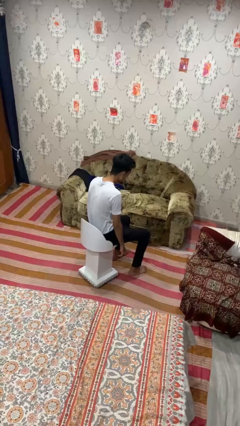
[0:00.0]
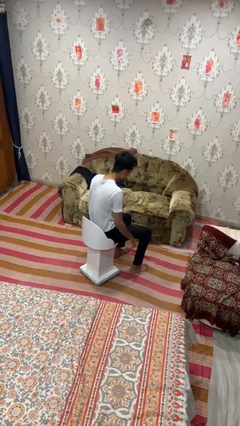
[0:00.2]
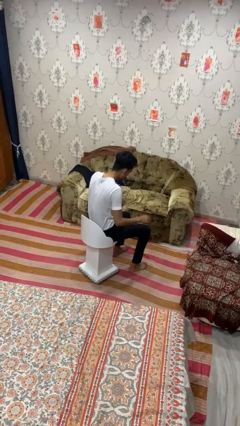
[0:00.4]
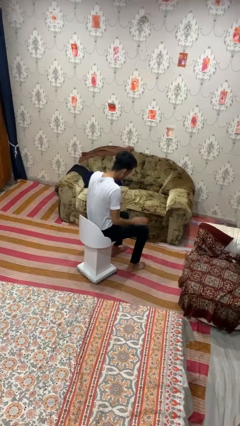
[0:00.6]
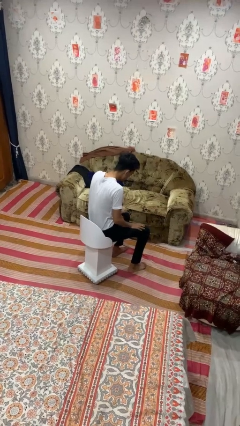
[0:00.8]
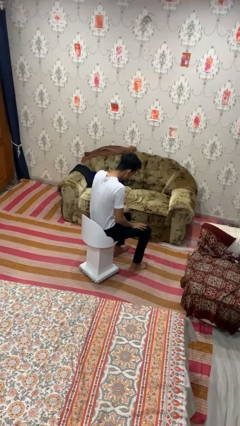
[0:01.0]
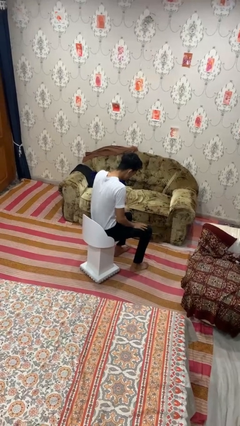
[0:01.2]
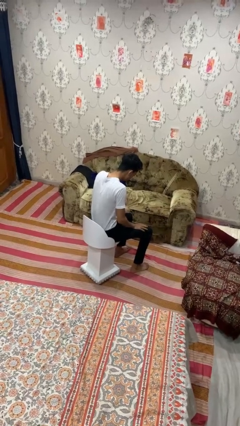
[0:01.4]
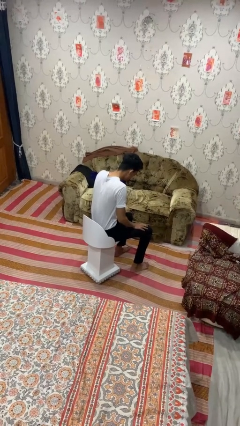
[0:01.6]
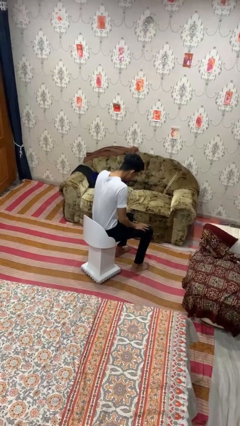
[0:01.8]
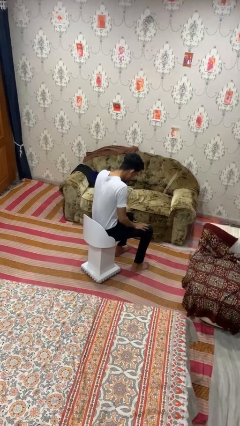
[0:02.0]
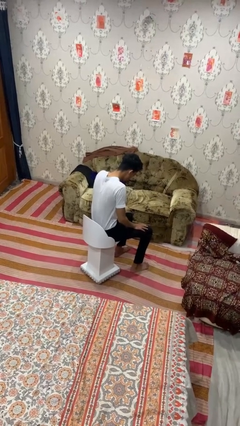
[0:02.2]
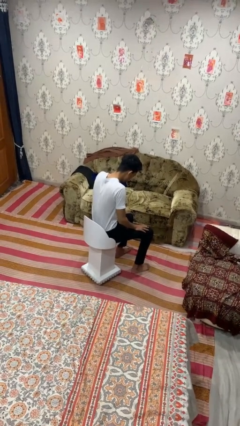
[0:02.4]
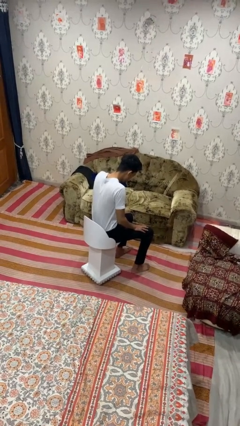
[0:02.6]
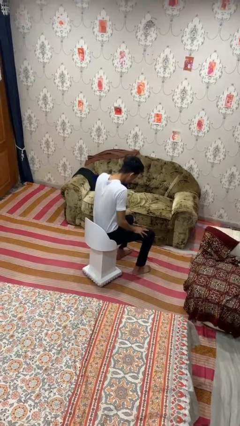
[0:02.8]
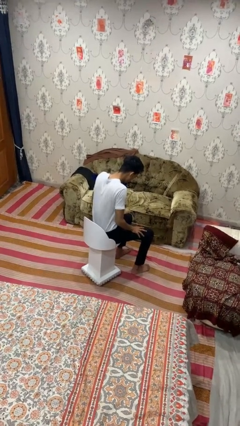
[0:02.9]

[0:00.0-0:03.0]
person slaps hands on thighs

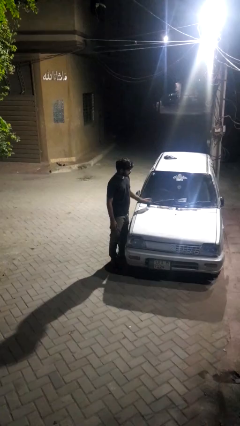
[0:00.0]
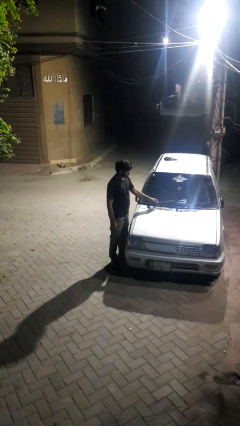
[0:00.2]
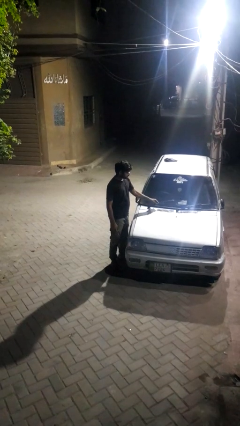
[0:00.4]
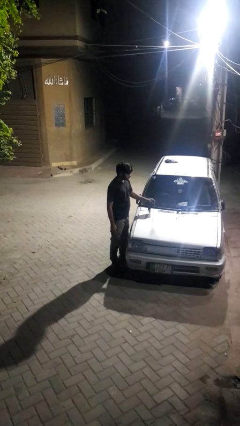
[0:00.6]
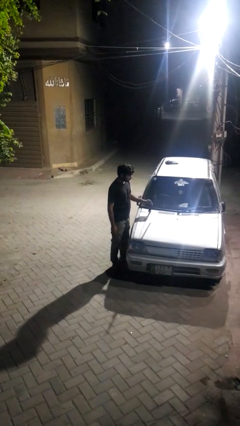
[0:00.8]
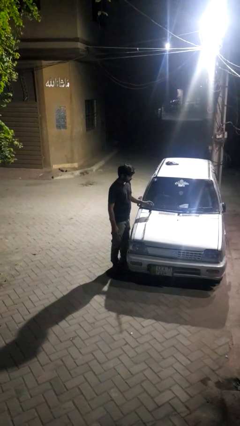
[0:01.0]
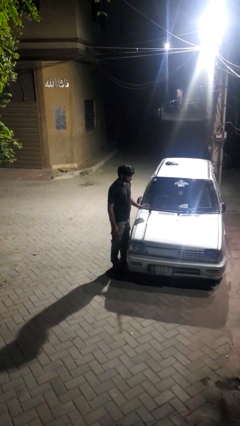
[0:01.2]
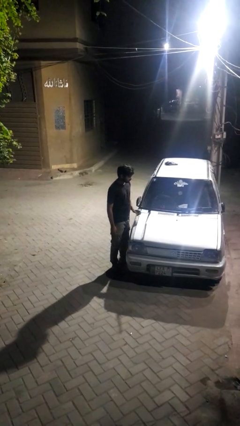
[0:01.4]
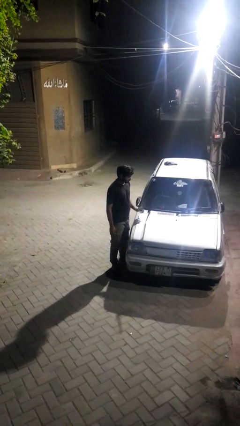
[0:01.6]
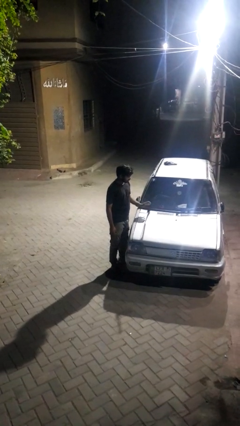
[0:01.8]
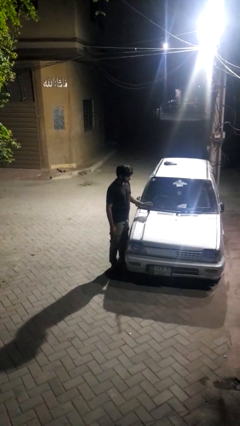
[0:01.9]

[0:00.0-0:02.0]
person flips up car wipers

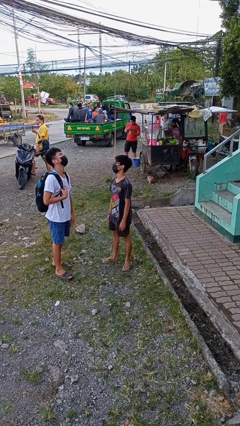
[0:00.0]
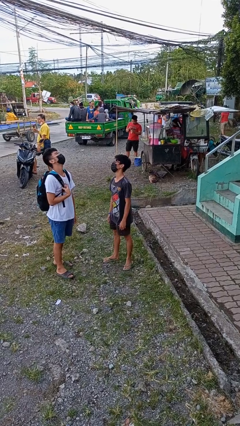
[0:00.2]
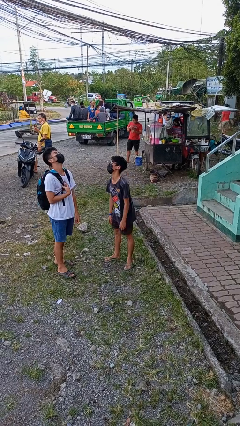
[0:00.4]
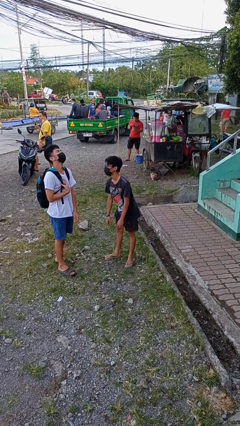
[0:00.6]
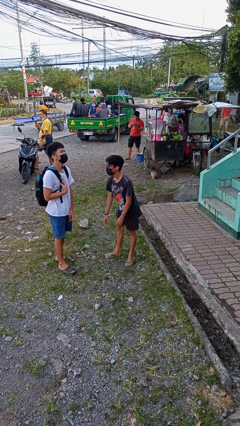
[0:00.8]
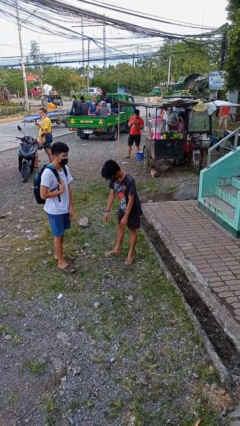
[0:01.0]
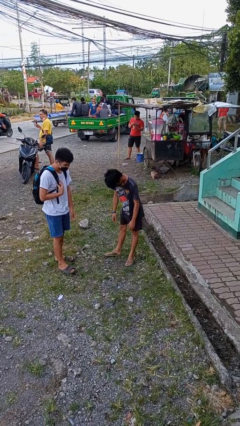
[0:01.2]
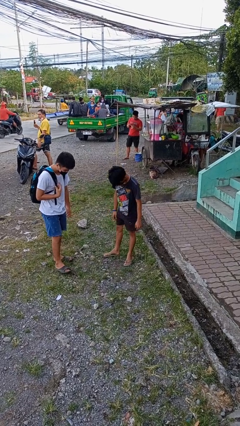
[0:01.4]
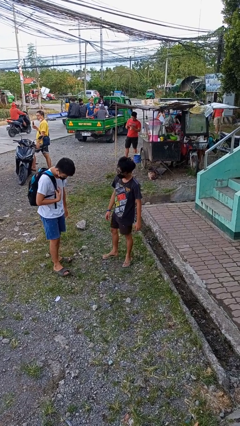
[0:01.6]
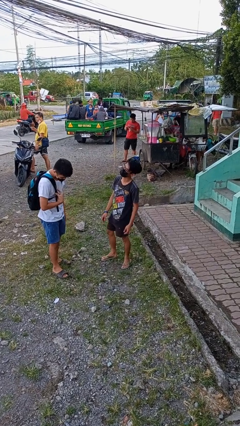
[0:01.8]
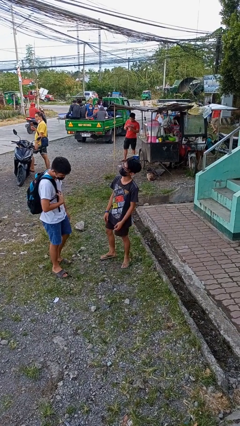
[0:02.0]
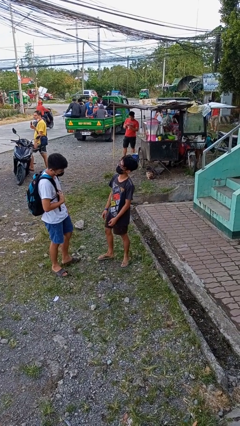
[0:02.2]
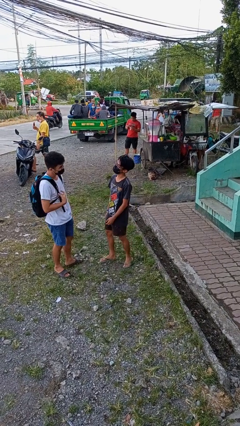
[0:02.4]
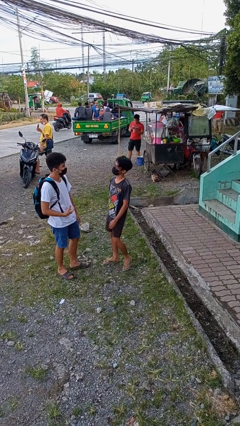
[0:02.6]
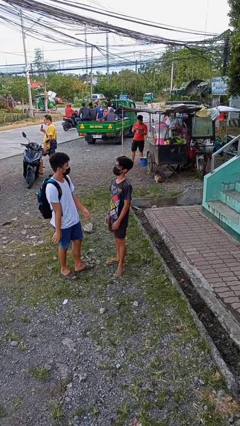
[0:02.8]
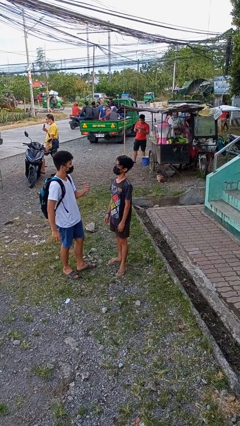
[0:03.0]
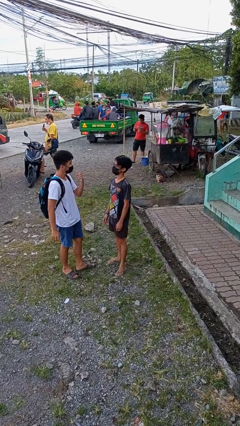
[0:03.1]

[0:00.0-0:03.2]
person laughs with person

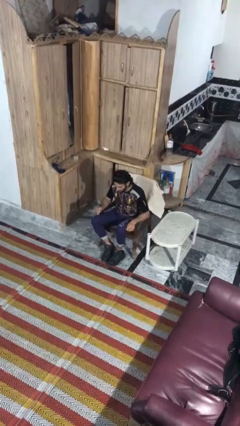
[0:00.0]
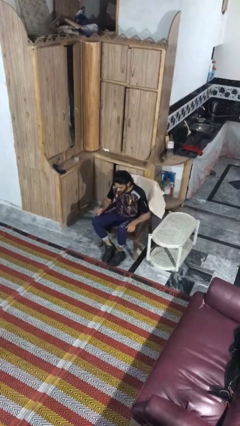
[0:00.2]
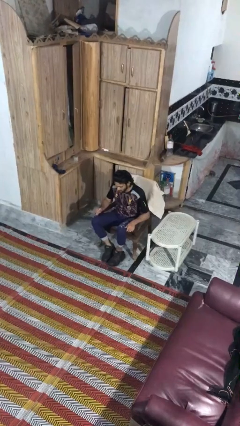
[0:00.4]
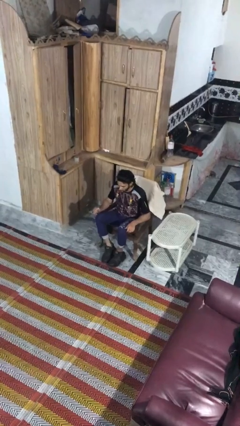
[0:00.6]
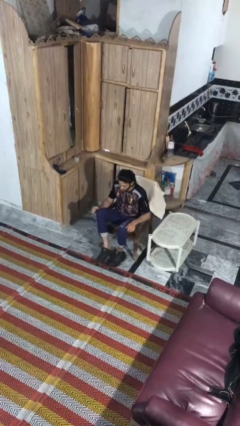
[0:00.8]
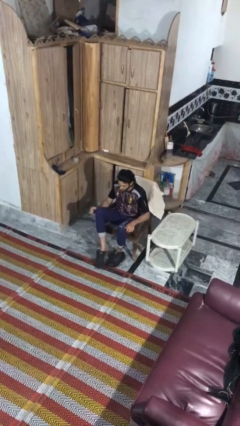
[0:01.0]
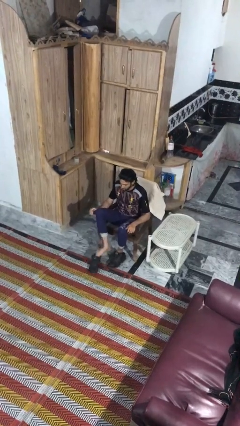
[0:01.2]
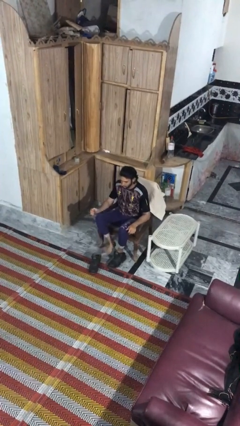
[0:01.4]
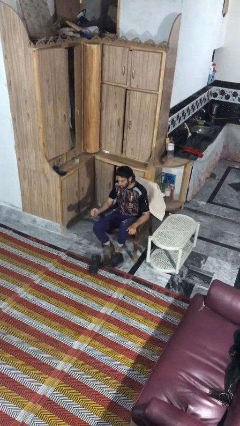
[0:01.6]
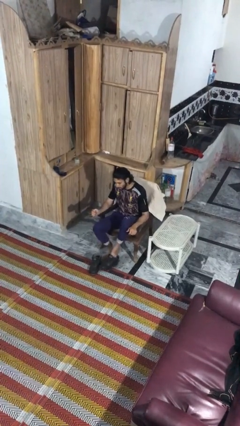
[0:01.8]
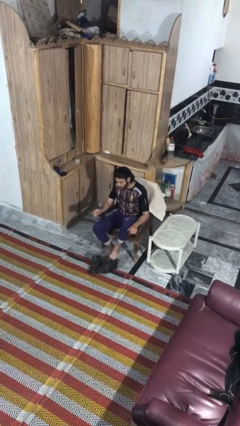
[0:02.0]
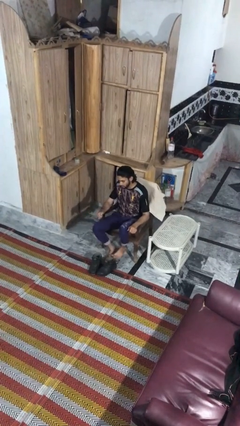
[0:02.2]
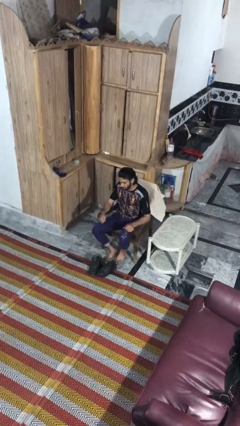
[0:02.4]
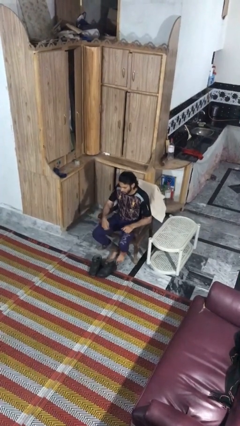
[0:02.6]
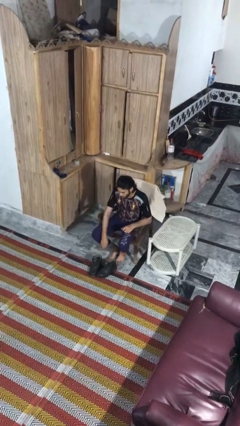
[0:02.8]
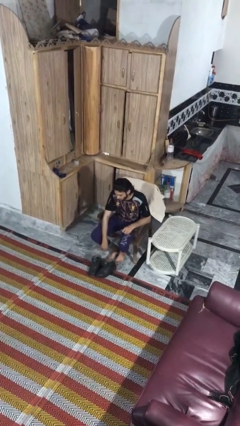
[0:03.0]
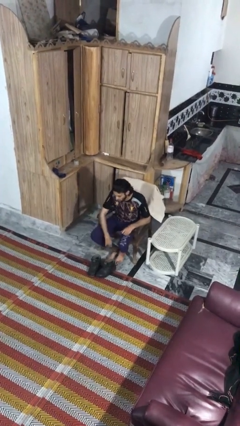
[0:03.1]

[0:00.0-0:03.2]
person takes off boots

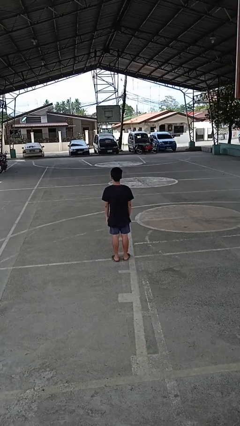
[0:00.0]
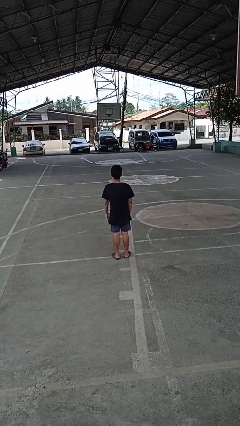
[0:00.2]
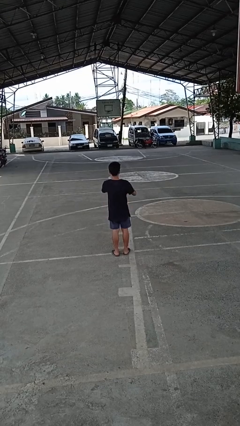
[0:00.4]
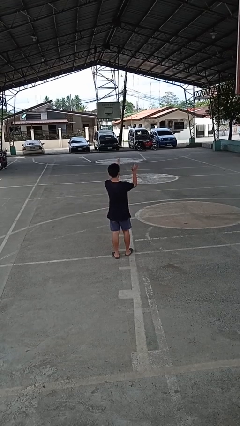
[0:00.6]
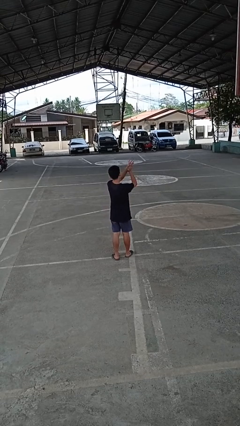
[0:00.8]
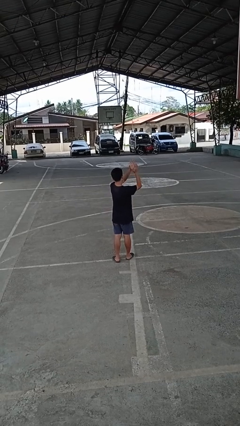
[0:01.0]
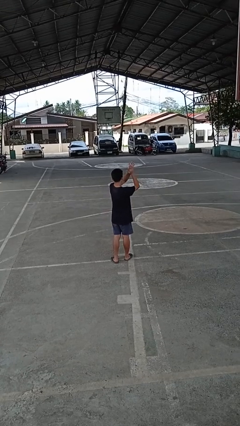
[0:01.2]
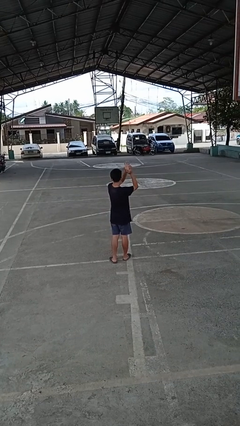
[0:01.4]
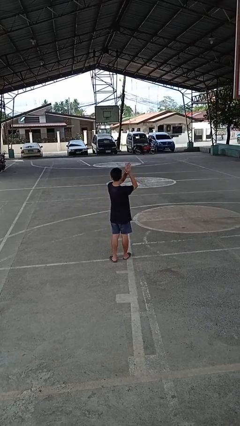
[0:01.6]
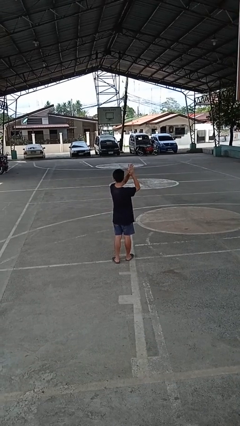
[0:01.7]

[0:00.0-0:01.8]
person claps hands

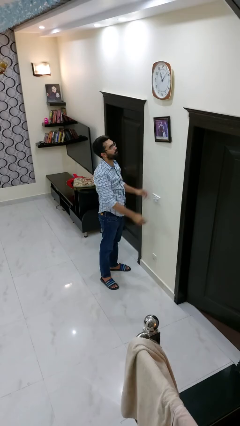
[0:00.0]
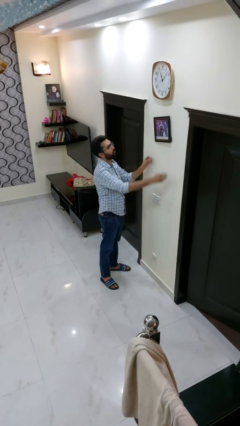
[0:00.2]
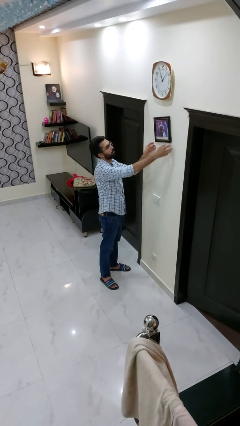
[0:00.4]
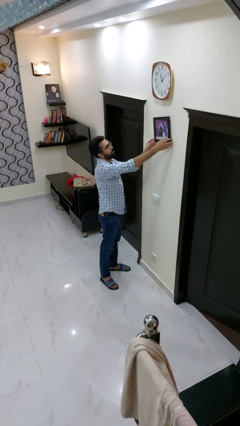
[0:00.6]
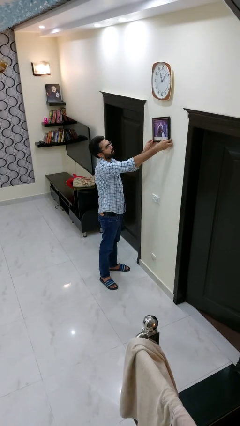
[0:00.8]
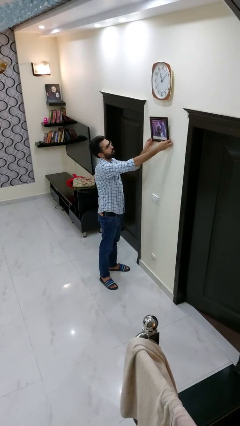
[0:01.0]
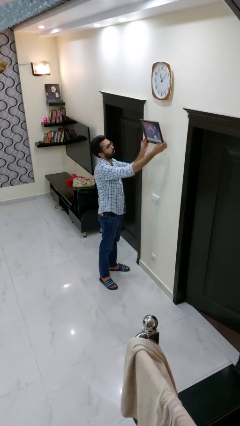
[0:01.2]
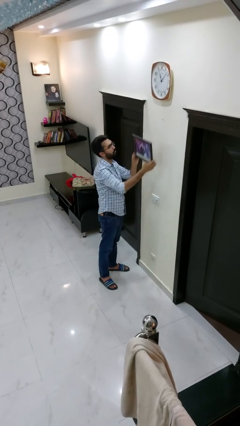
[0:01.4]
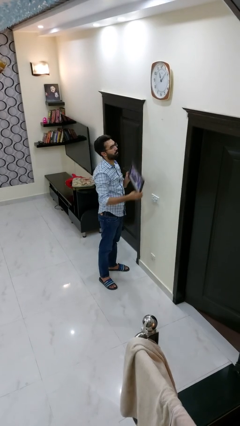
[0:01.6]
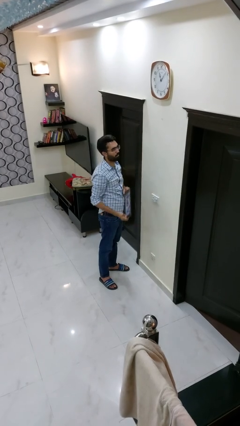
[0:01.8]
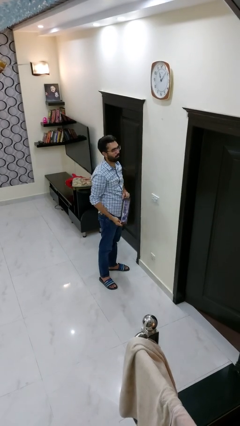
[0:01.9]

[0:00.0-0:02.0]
person takes down picture frame

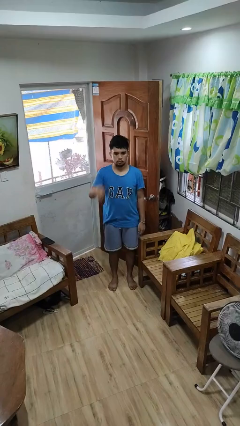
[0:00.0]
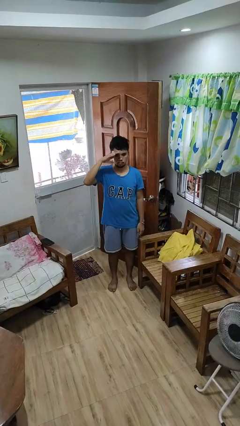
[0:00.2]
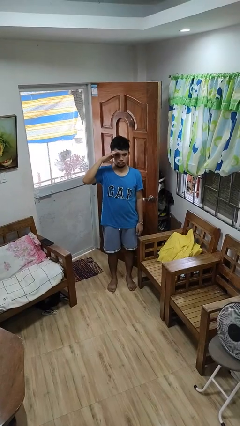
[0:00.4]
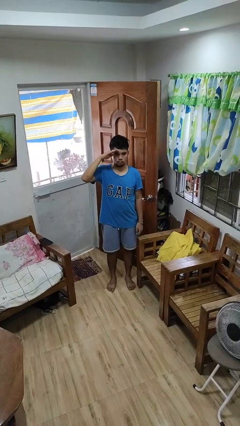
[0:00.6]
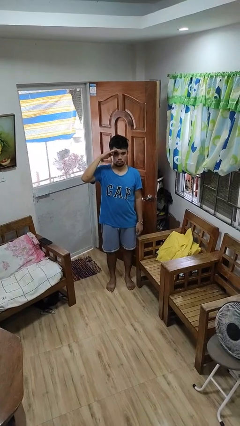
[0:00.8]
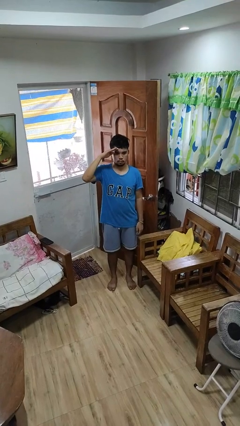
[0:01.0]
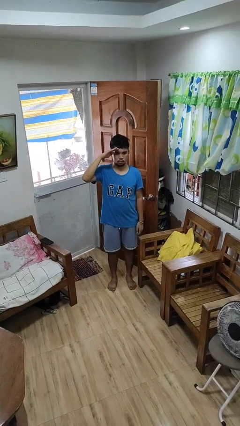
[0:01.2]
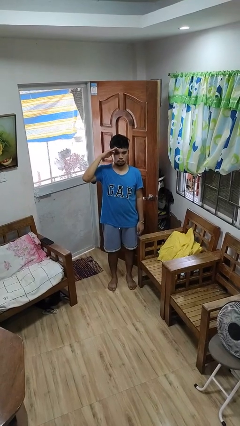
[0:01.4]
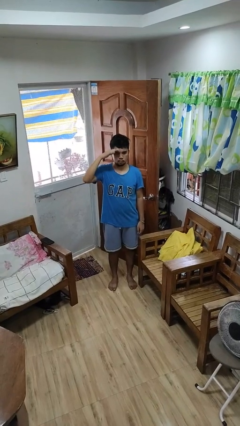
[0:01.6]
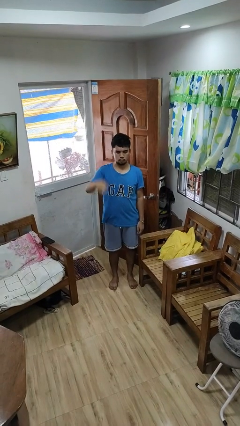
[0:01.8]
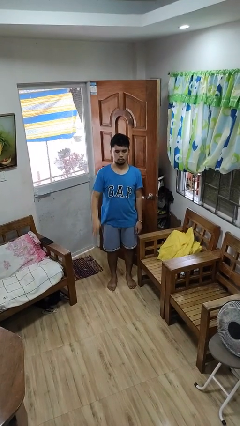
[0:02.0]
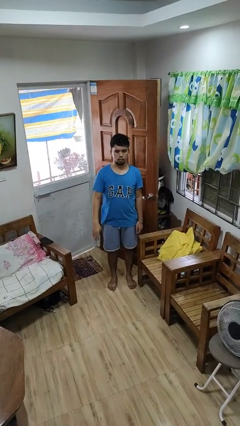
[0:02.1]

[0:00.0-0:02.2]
person salutes
